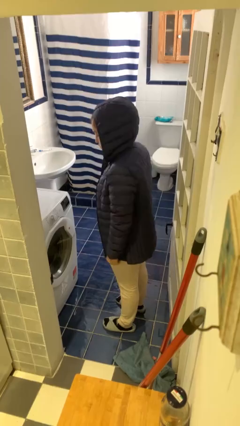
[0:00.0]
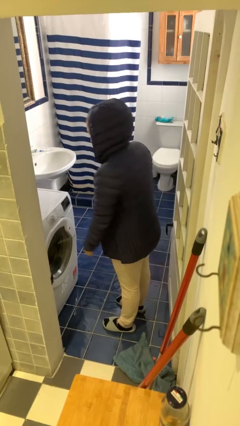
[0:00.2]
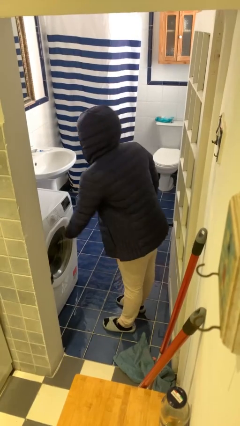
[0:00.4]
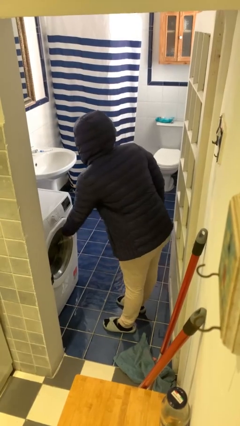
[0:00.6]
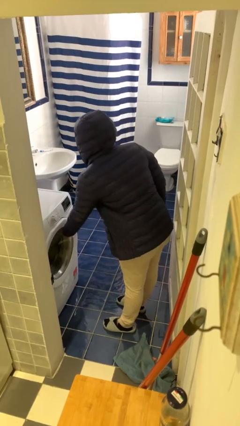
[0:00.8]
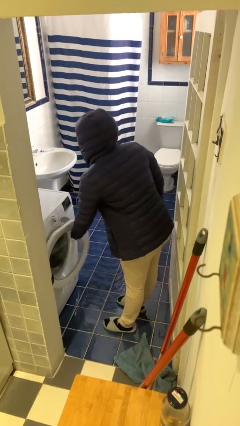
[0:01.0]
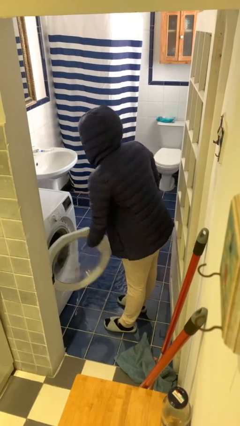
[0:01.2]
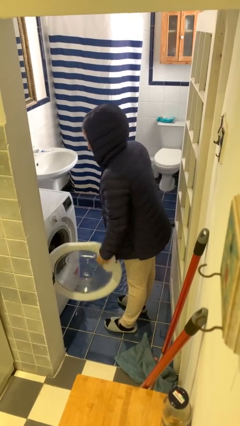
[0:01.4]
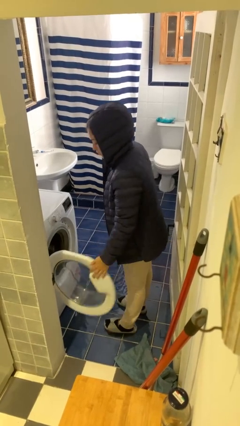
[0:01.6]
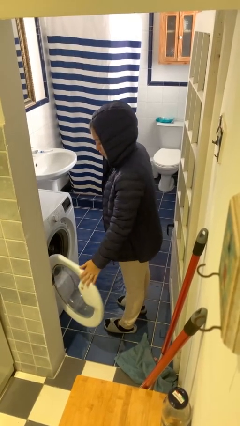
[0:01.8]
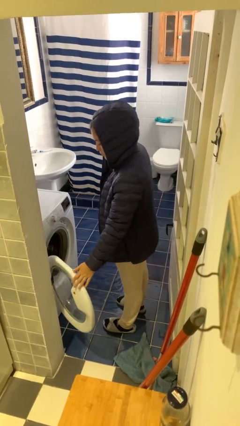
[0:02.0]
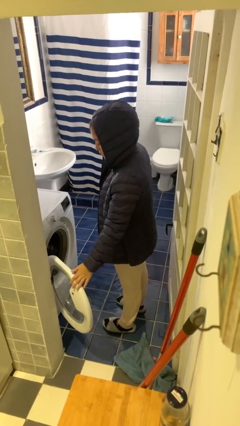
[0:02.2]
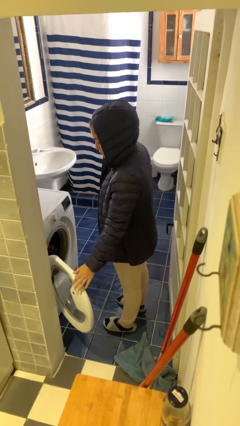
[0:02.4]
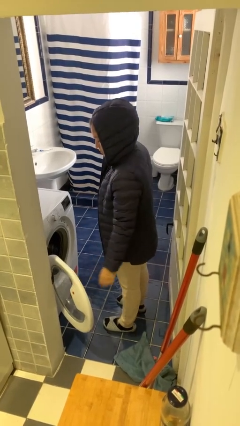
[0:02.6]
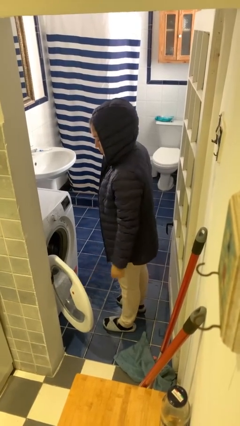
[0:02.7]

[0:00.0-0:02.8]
person opens clothes washer

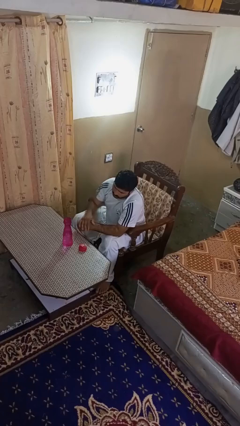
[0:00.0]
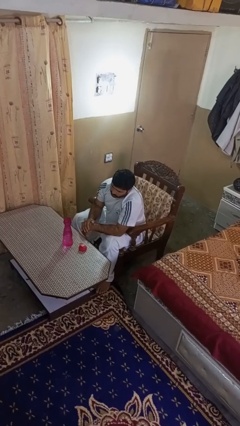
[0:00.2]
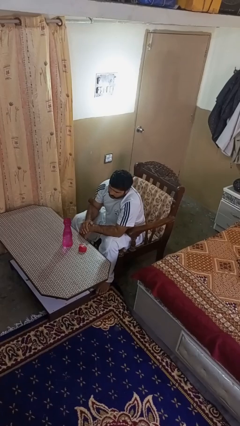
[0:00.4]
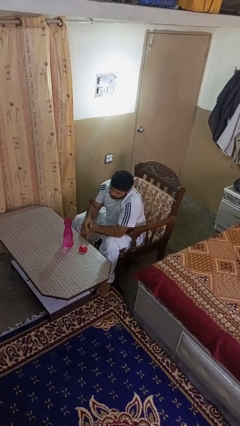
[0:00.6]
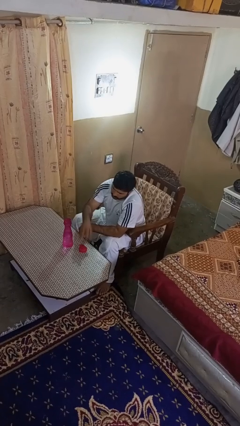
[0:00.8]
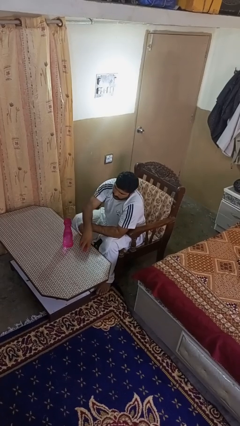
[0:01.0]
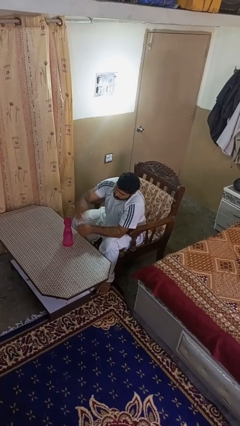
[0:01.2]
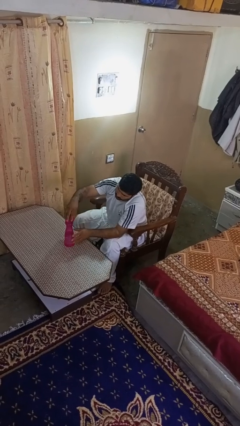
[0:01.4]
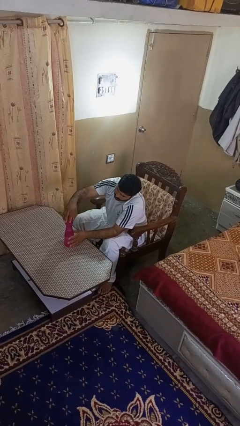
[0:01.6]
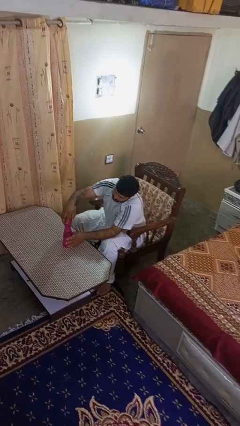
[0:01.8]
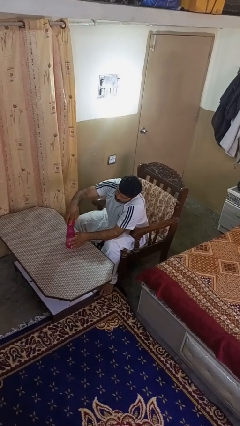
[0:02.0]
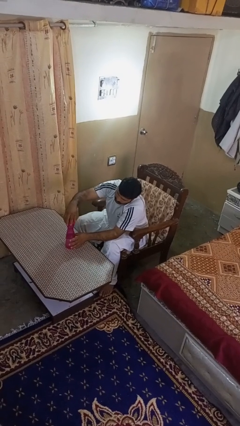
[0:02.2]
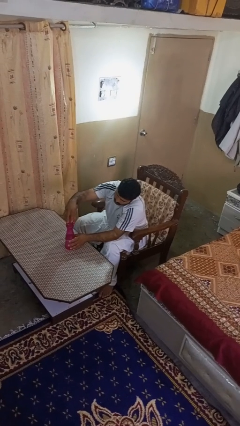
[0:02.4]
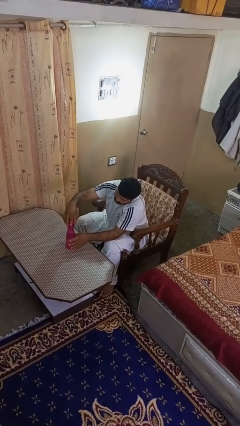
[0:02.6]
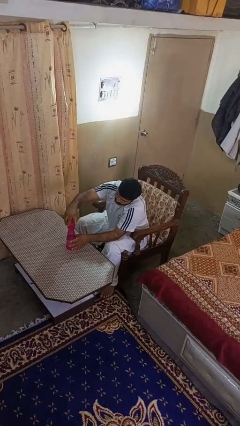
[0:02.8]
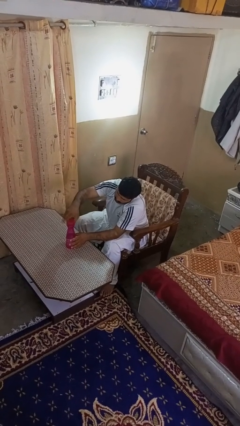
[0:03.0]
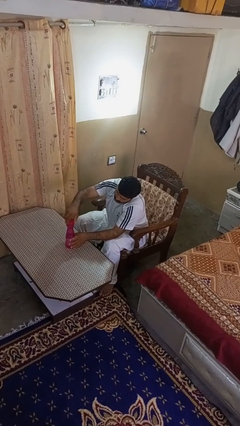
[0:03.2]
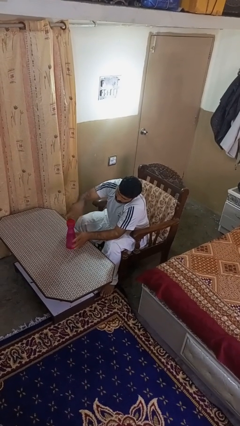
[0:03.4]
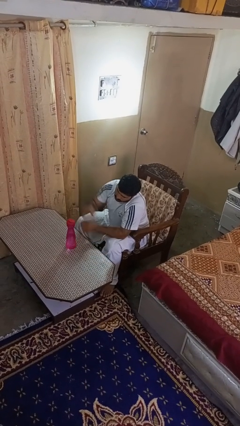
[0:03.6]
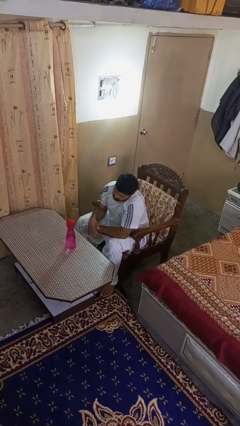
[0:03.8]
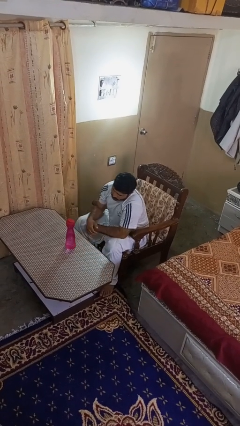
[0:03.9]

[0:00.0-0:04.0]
person screws lid to bottle

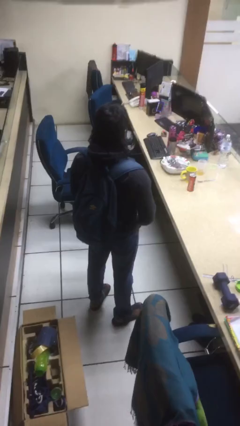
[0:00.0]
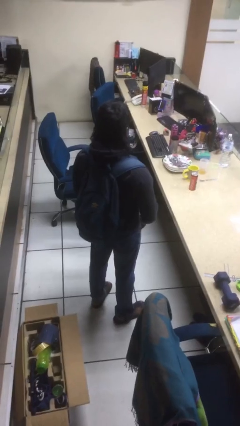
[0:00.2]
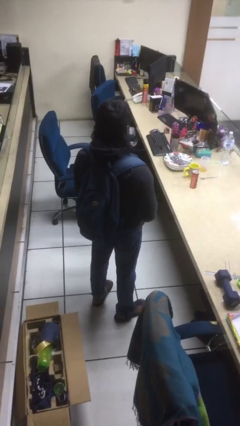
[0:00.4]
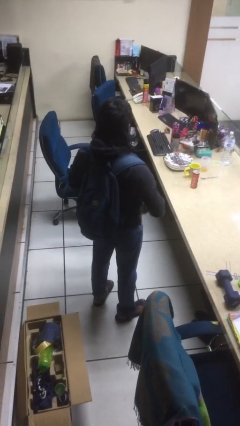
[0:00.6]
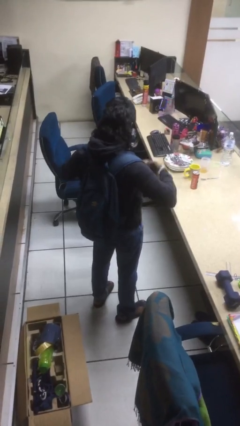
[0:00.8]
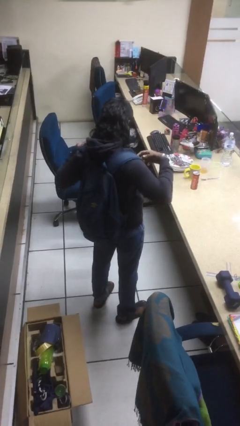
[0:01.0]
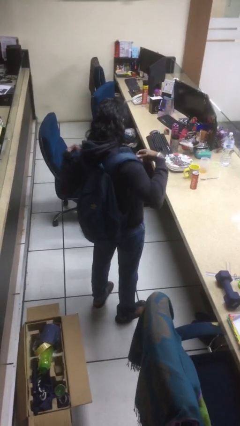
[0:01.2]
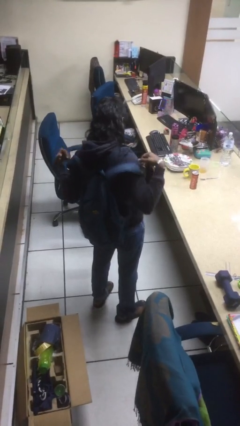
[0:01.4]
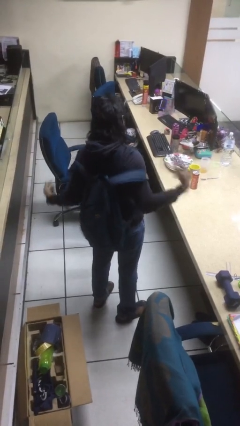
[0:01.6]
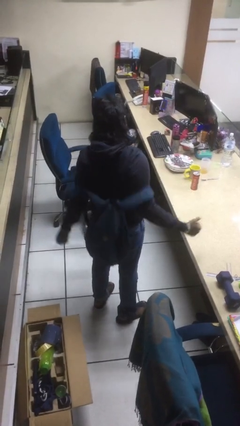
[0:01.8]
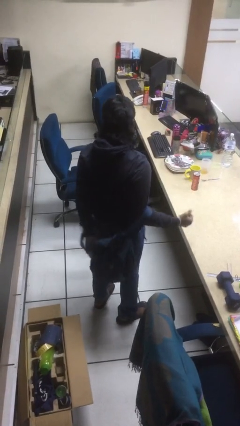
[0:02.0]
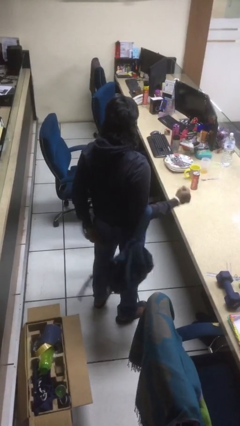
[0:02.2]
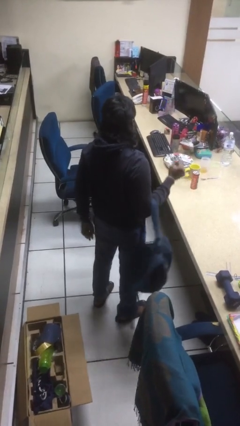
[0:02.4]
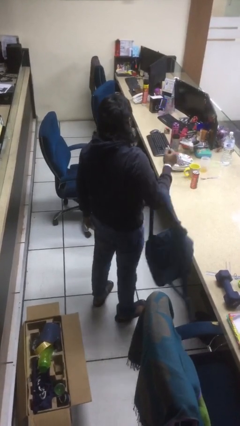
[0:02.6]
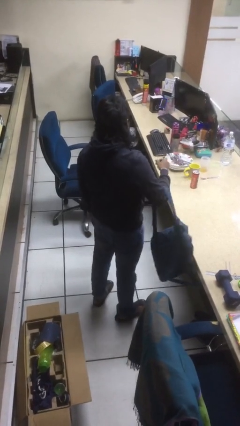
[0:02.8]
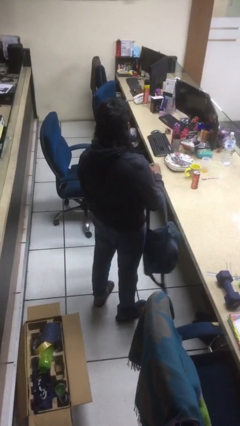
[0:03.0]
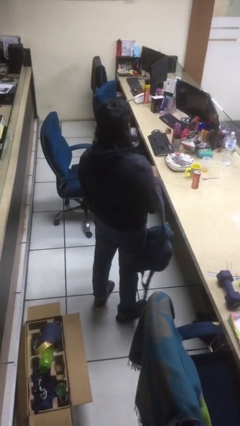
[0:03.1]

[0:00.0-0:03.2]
person takes off backpack

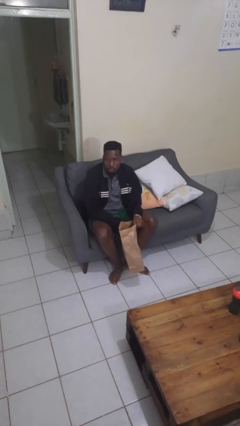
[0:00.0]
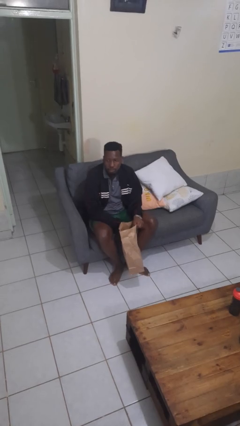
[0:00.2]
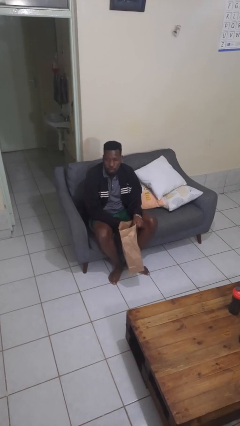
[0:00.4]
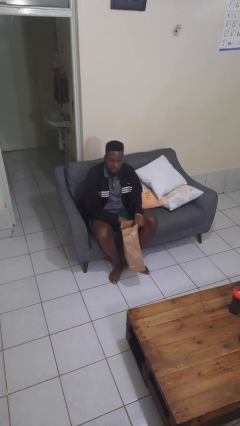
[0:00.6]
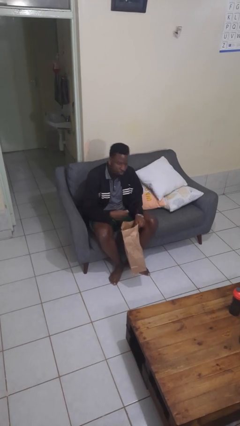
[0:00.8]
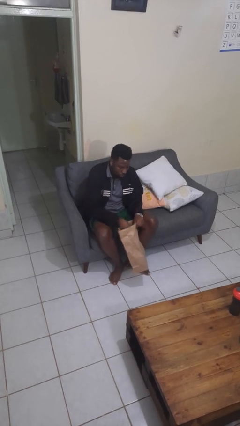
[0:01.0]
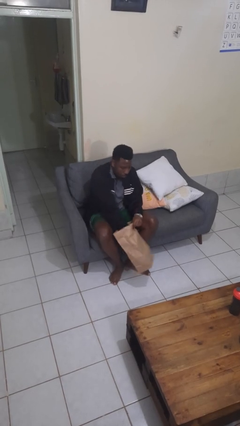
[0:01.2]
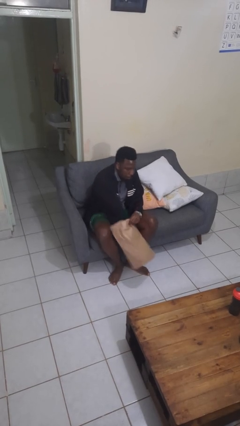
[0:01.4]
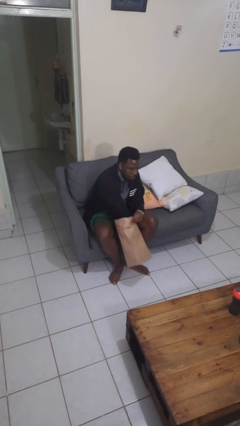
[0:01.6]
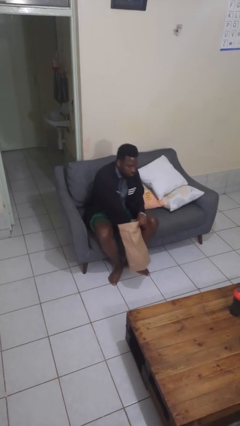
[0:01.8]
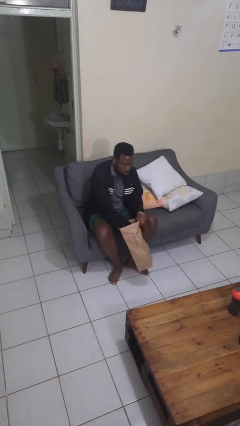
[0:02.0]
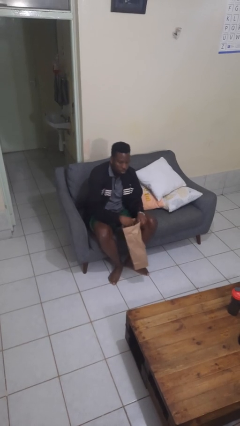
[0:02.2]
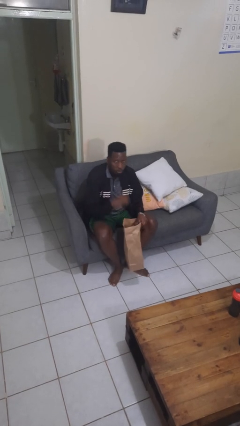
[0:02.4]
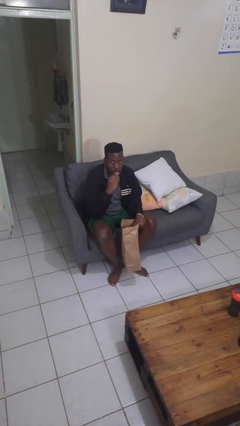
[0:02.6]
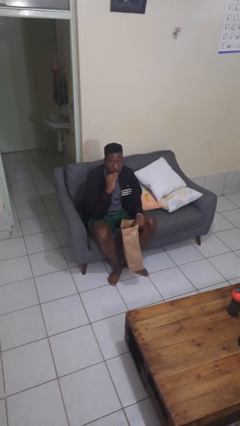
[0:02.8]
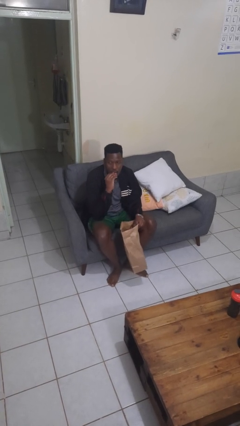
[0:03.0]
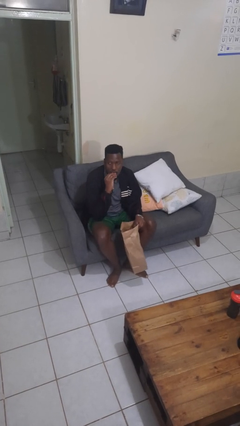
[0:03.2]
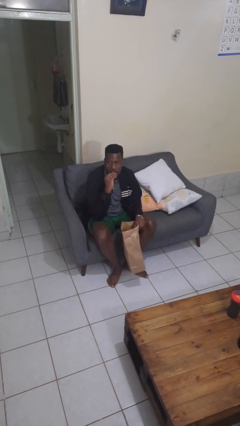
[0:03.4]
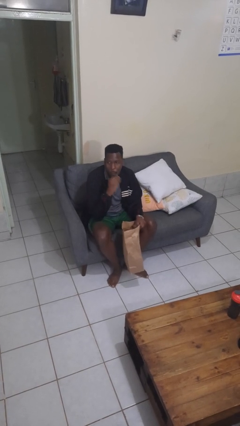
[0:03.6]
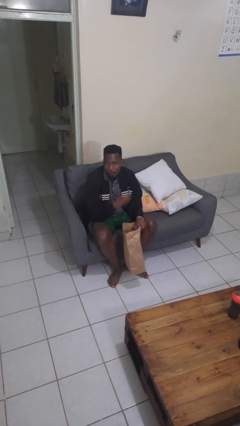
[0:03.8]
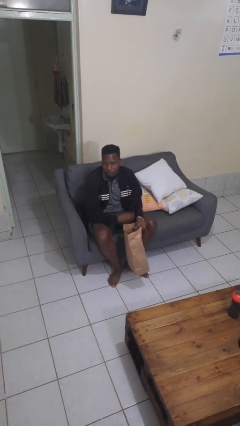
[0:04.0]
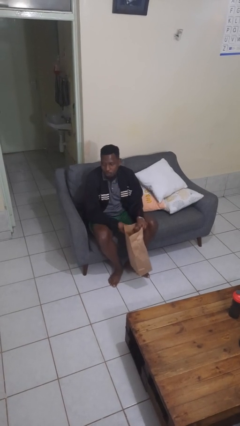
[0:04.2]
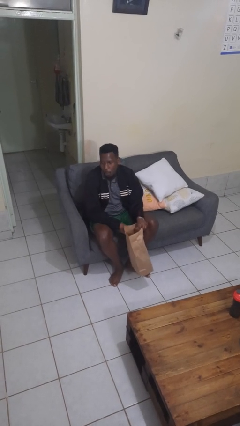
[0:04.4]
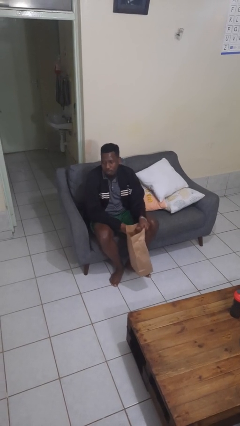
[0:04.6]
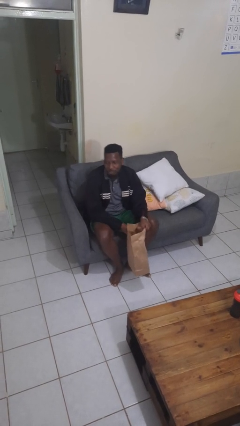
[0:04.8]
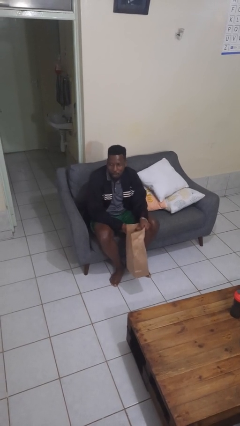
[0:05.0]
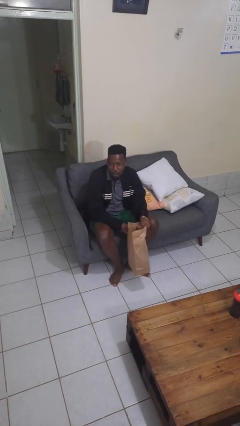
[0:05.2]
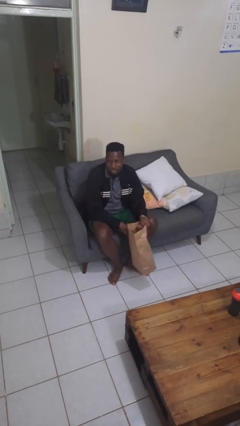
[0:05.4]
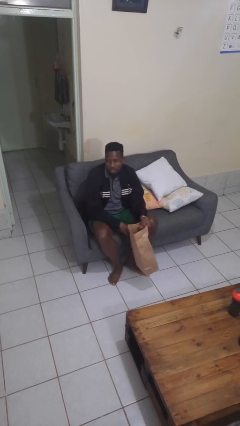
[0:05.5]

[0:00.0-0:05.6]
person eats snack from bag

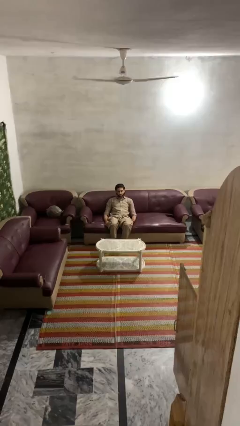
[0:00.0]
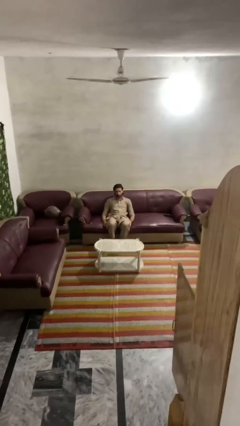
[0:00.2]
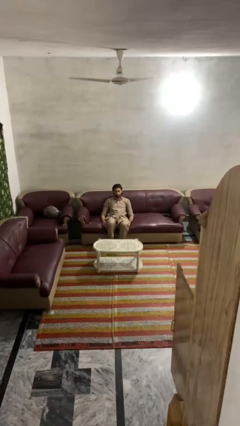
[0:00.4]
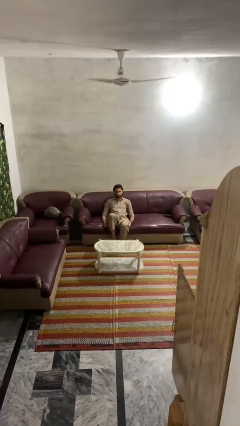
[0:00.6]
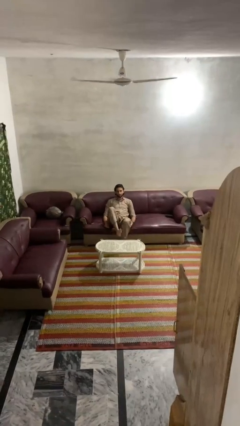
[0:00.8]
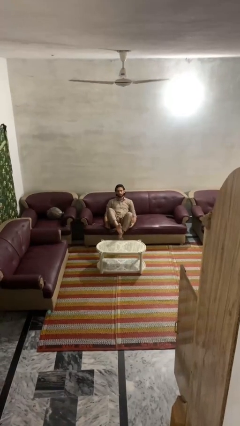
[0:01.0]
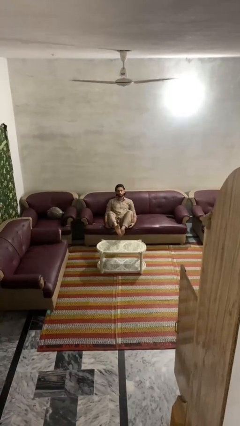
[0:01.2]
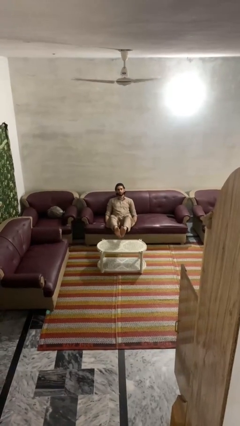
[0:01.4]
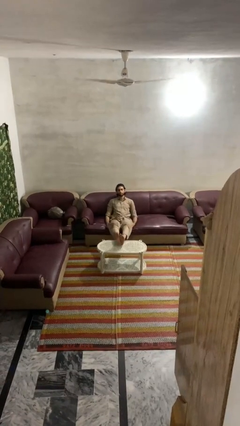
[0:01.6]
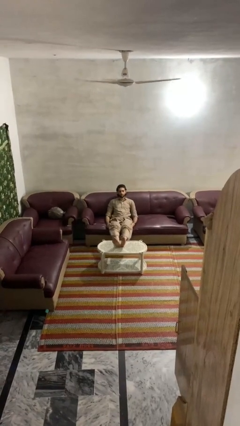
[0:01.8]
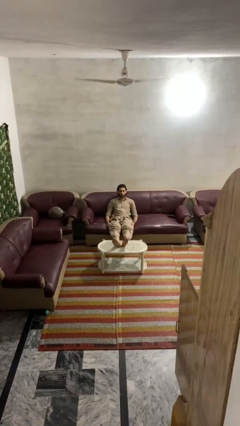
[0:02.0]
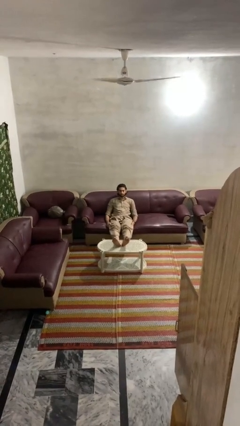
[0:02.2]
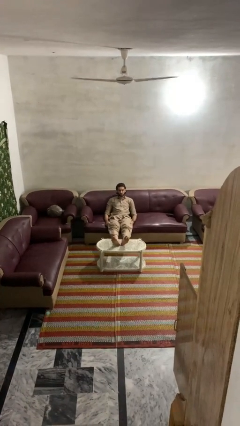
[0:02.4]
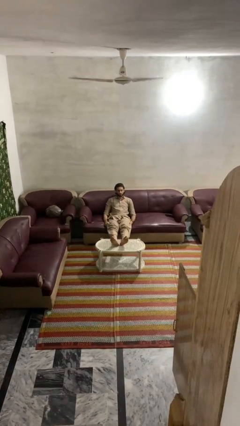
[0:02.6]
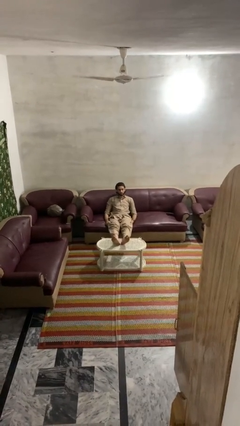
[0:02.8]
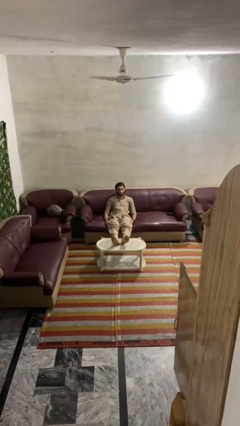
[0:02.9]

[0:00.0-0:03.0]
person puts feet up
